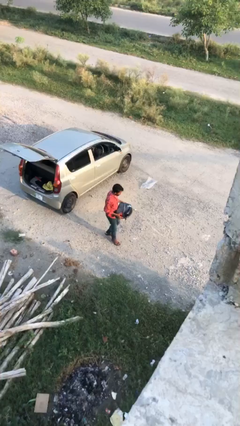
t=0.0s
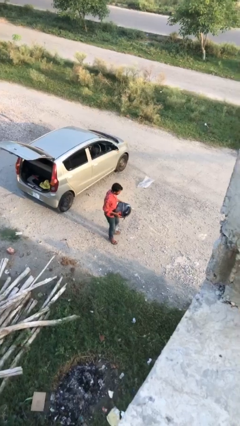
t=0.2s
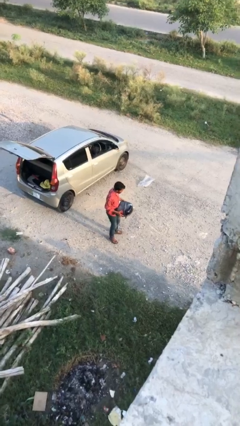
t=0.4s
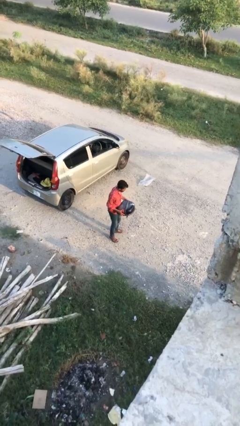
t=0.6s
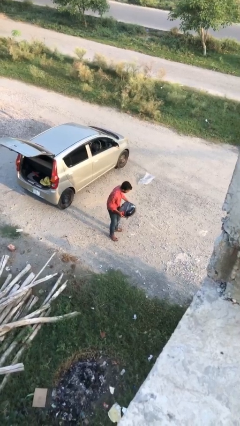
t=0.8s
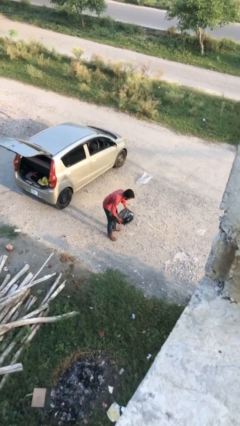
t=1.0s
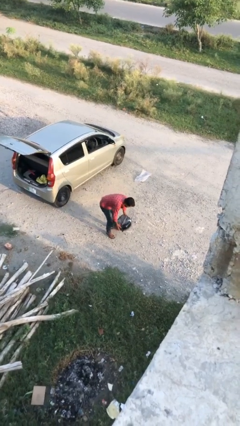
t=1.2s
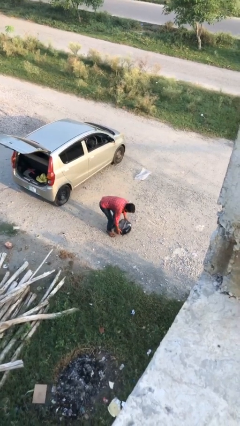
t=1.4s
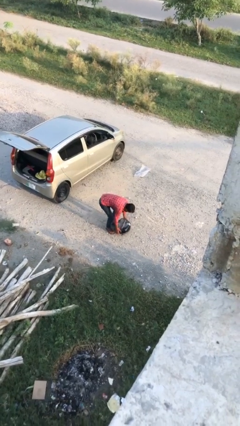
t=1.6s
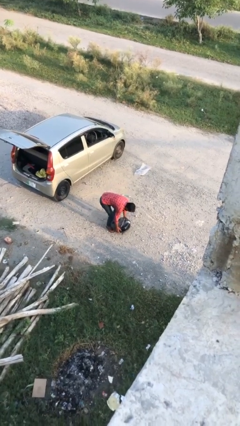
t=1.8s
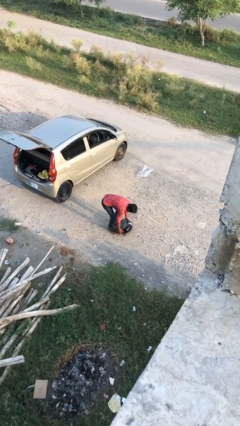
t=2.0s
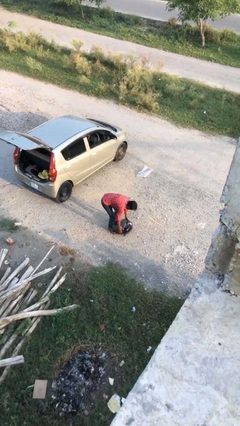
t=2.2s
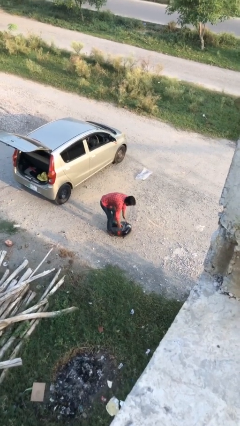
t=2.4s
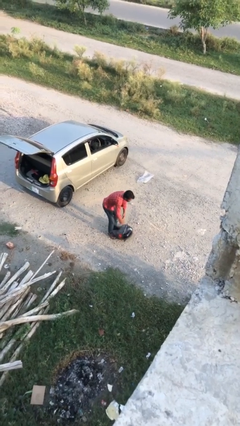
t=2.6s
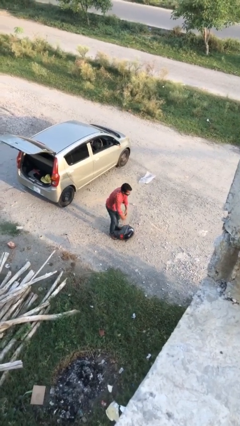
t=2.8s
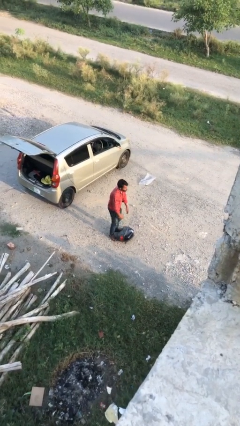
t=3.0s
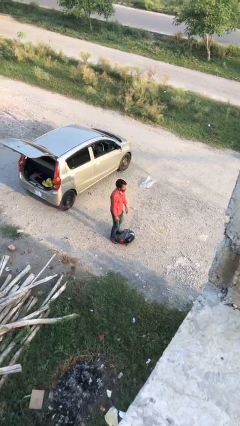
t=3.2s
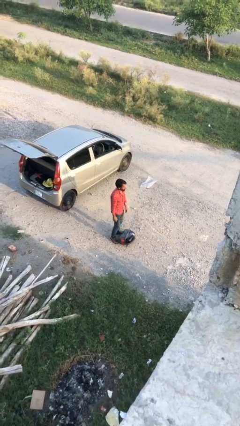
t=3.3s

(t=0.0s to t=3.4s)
person puts down object on floor

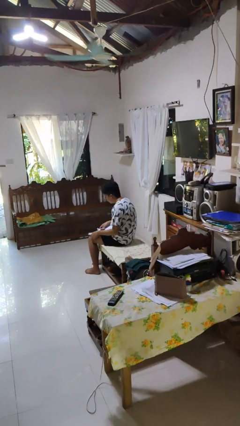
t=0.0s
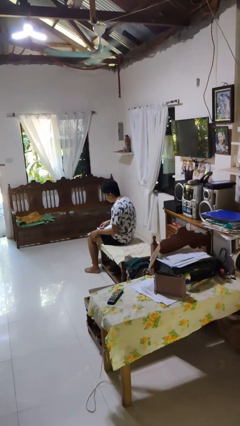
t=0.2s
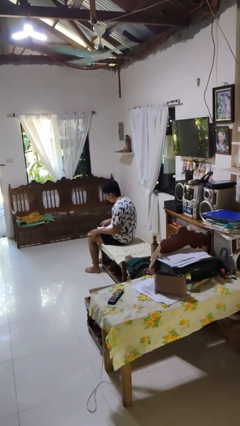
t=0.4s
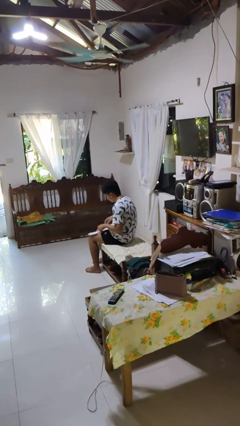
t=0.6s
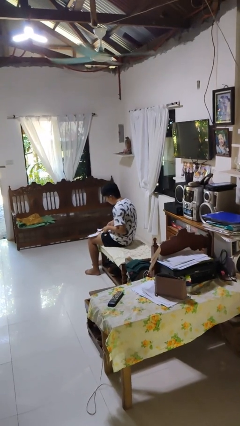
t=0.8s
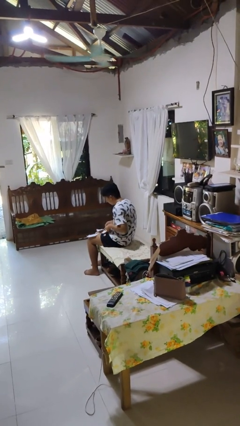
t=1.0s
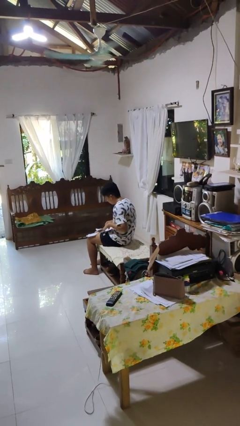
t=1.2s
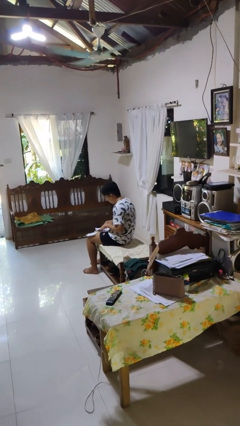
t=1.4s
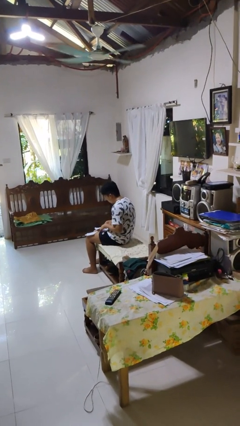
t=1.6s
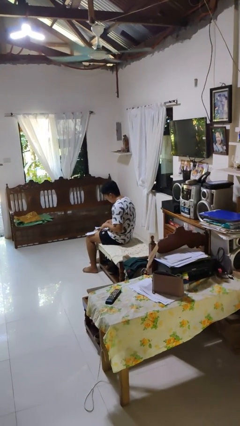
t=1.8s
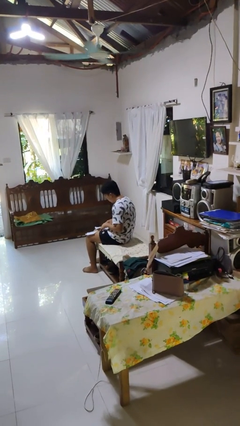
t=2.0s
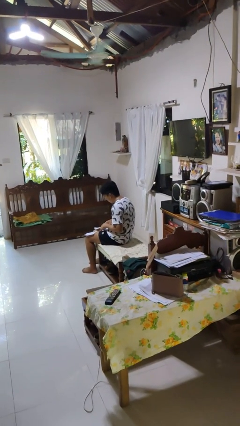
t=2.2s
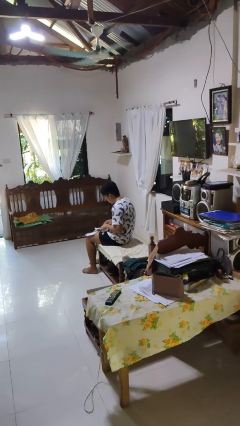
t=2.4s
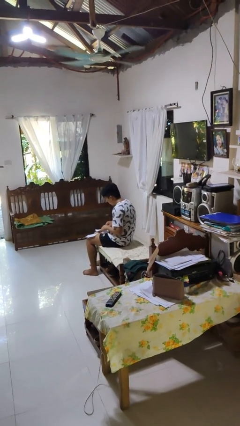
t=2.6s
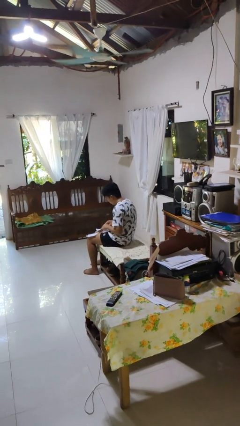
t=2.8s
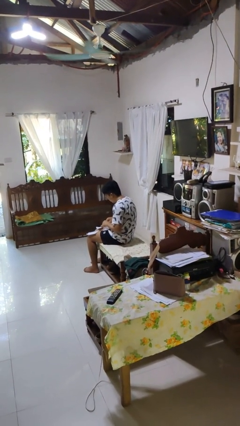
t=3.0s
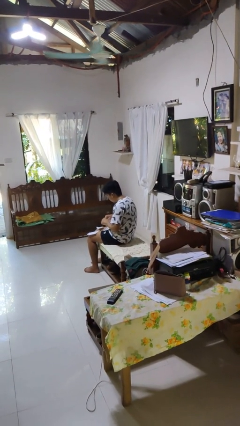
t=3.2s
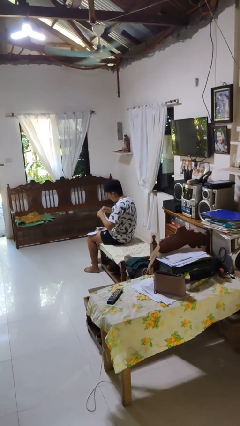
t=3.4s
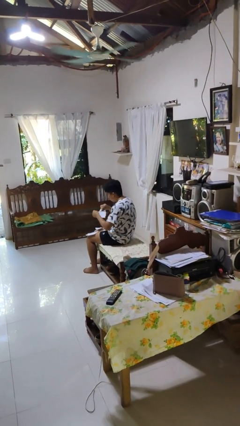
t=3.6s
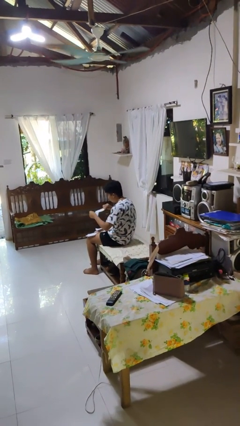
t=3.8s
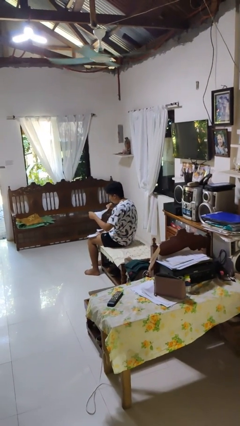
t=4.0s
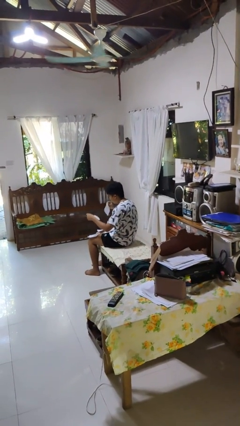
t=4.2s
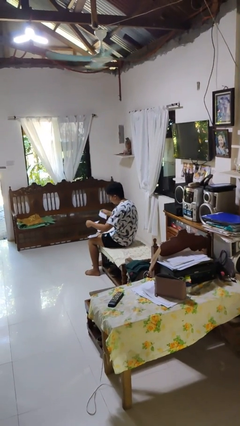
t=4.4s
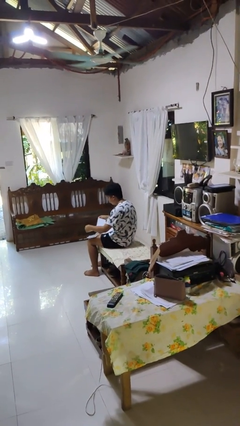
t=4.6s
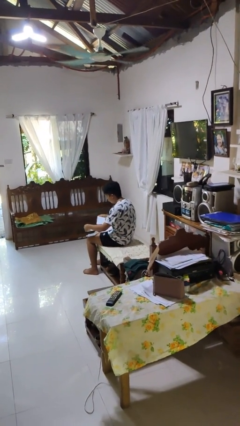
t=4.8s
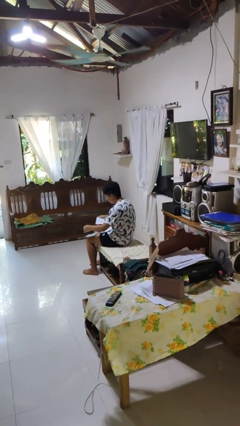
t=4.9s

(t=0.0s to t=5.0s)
person tears paper

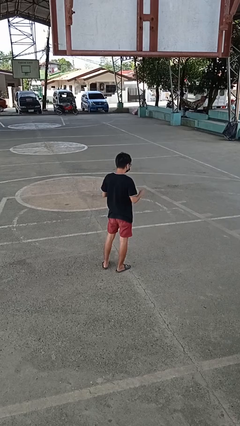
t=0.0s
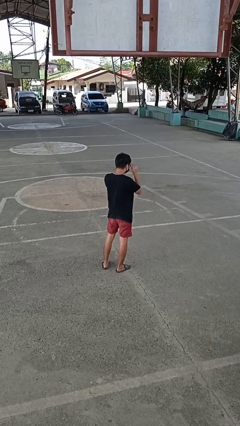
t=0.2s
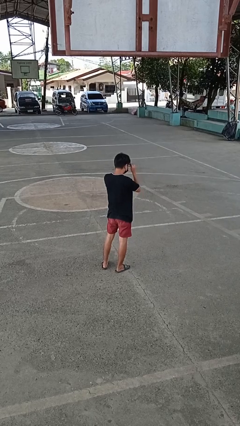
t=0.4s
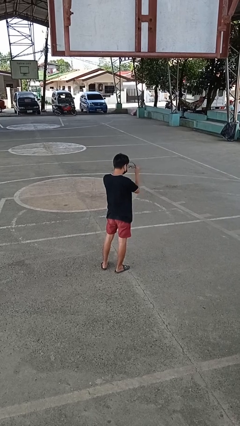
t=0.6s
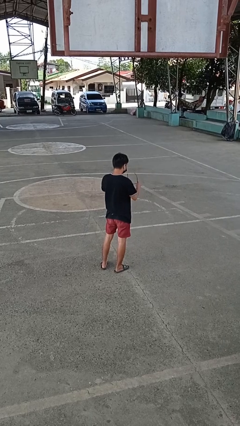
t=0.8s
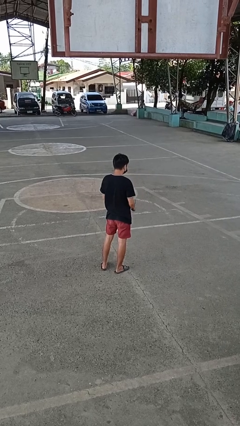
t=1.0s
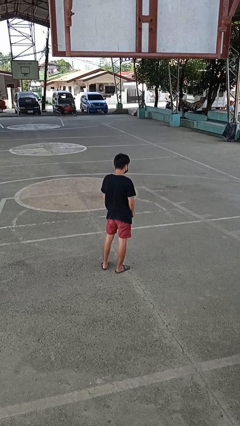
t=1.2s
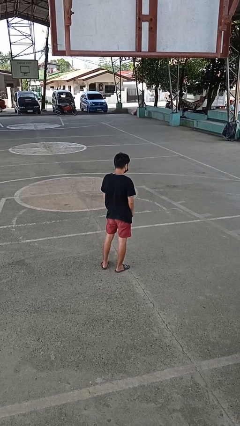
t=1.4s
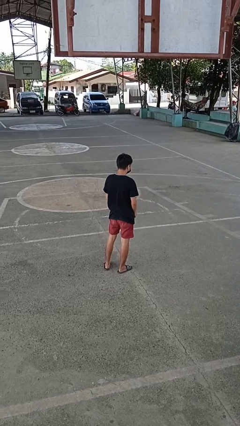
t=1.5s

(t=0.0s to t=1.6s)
person takes off glasses

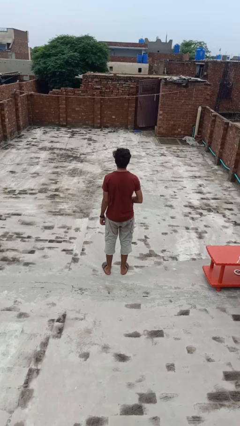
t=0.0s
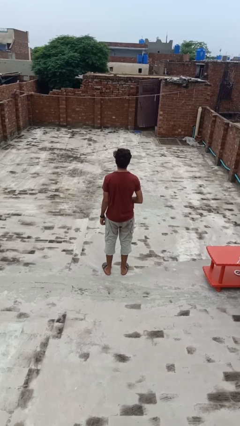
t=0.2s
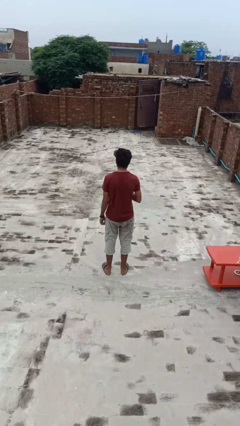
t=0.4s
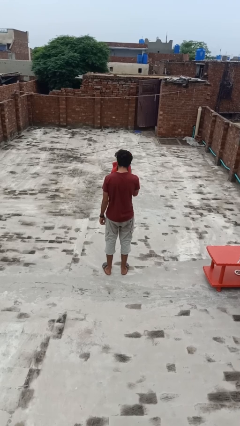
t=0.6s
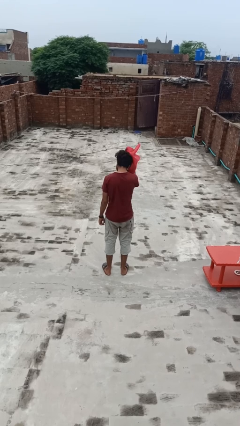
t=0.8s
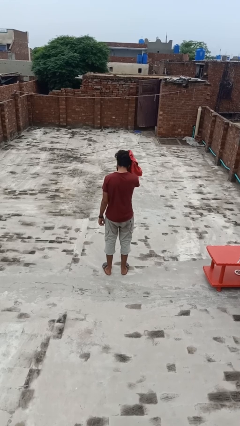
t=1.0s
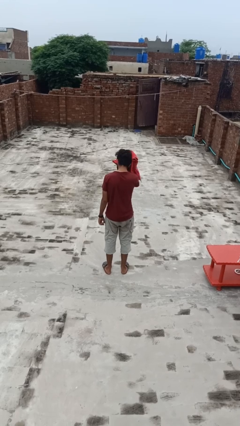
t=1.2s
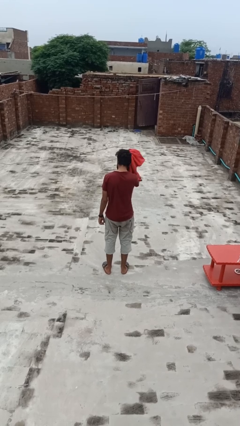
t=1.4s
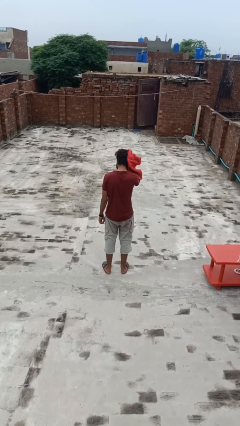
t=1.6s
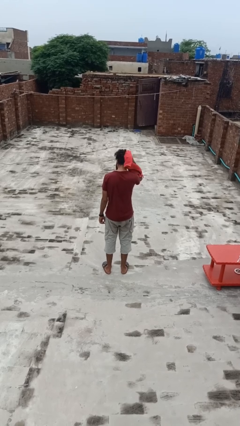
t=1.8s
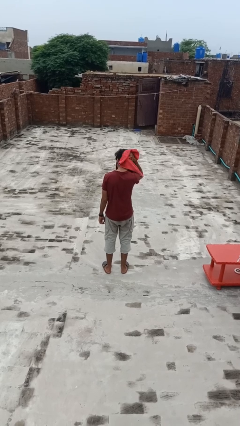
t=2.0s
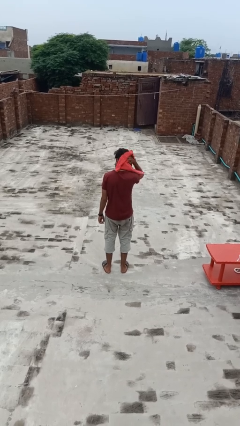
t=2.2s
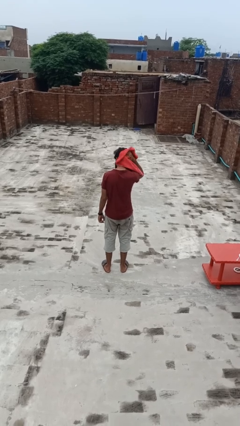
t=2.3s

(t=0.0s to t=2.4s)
person dries hair with towel

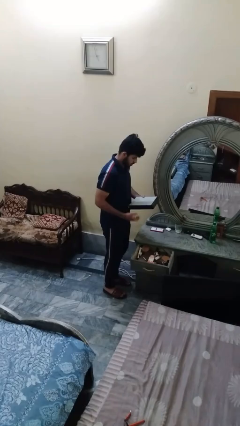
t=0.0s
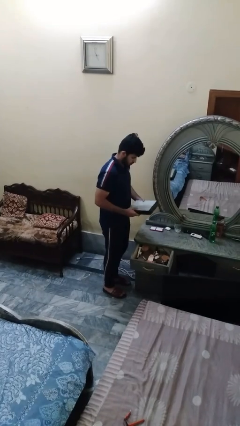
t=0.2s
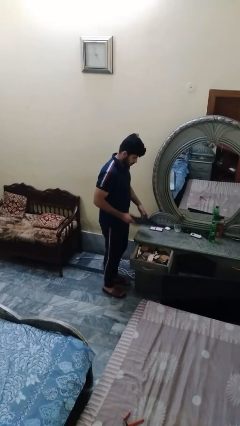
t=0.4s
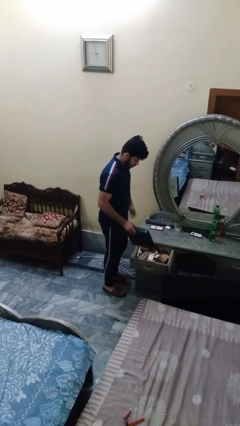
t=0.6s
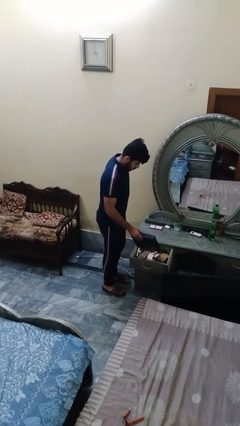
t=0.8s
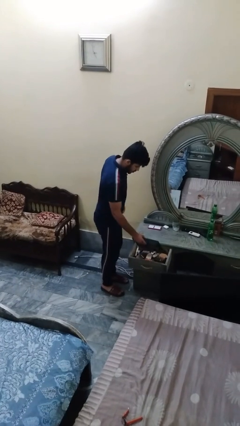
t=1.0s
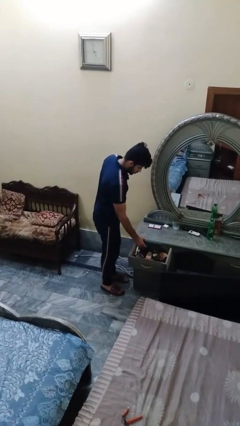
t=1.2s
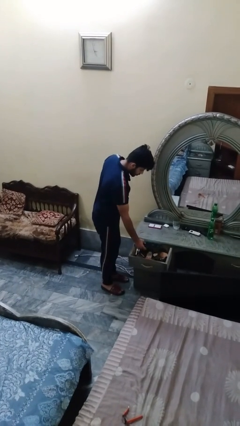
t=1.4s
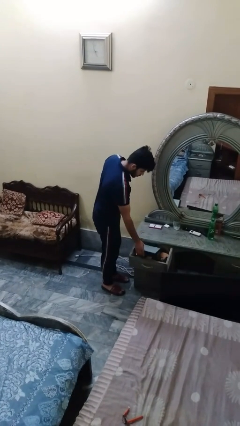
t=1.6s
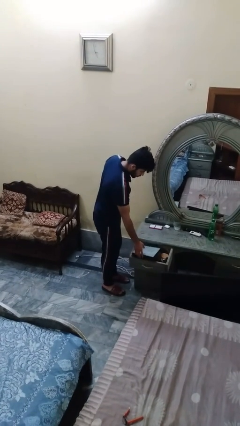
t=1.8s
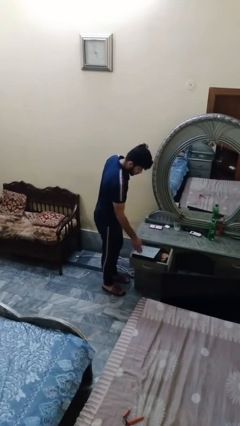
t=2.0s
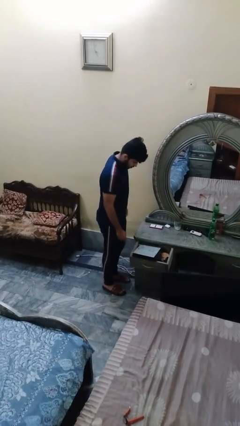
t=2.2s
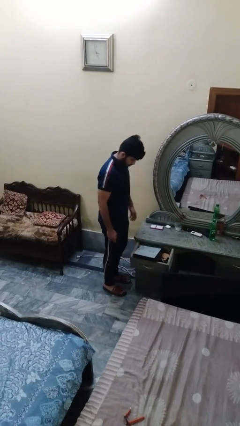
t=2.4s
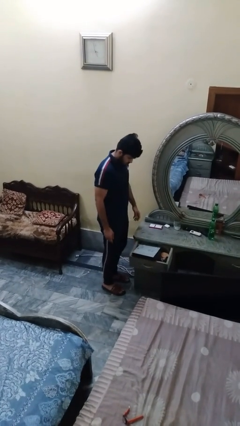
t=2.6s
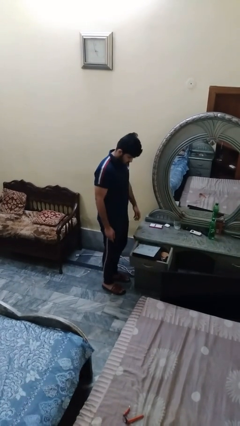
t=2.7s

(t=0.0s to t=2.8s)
person puts down object into cabinet

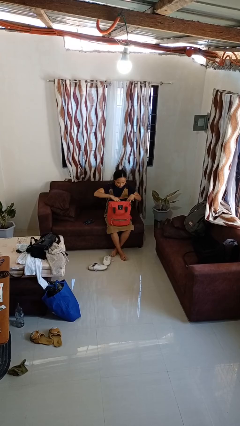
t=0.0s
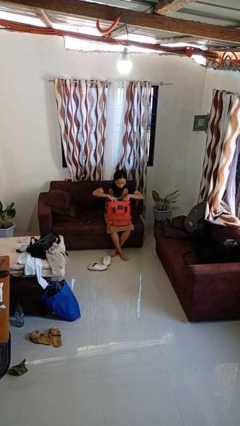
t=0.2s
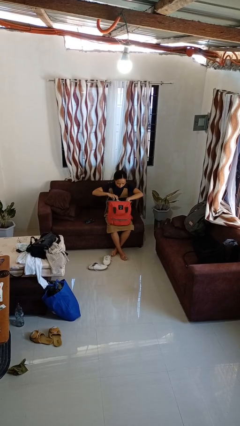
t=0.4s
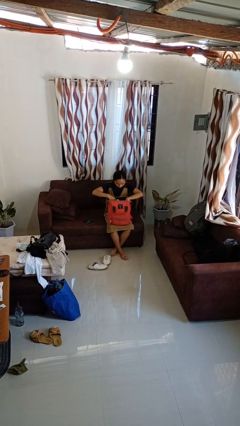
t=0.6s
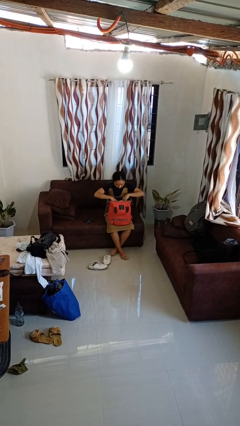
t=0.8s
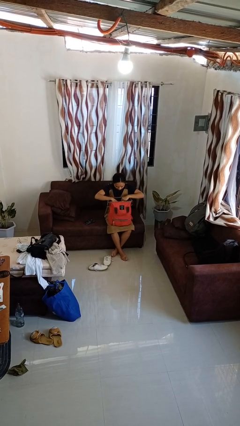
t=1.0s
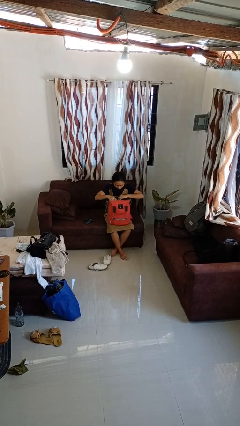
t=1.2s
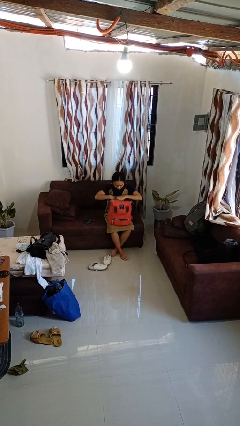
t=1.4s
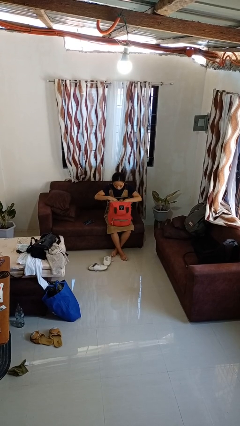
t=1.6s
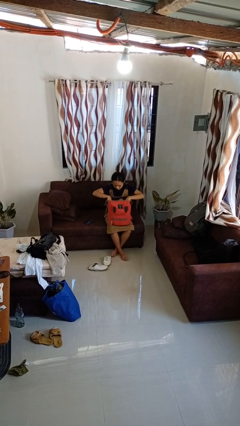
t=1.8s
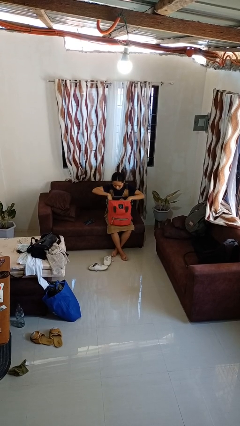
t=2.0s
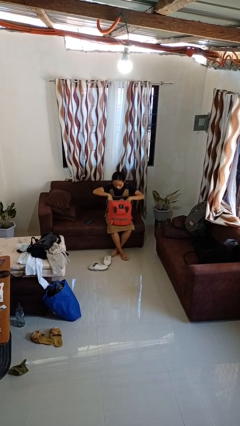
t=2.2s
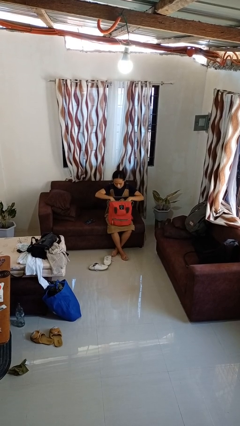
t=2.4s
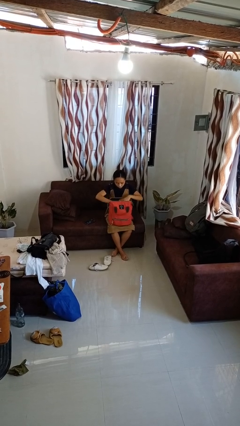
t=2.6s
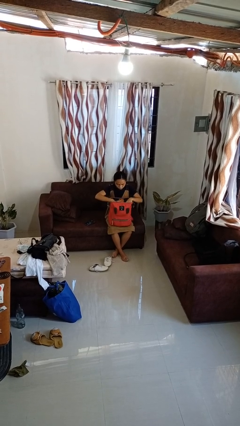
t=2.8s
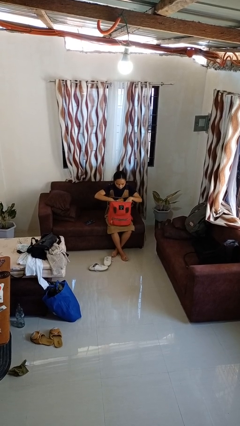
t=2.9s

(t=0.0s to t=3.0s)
person searches in backpack
